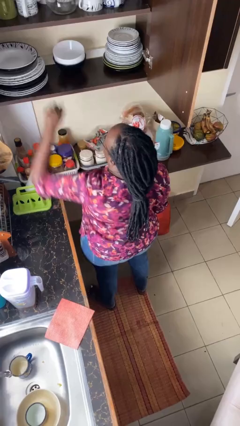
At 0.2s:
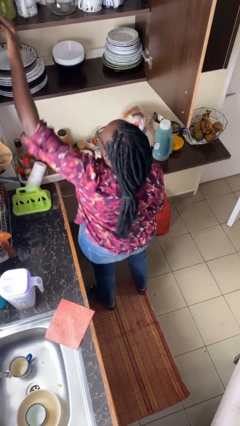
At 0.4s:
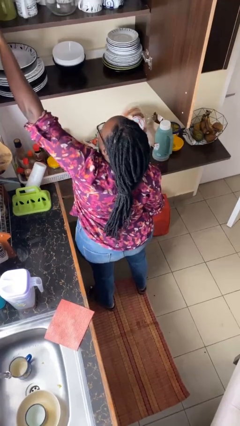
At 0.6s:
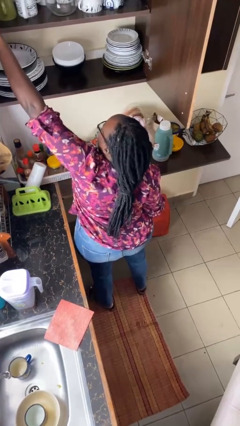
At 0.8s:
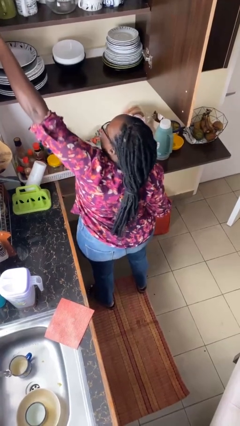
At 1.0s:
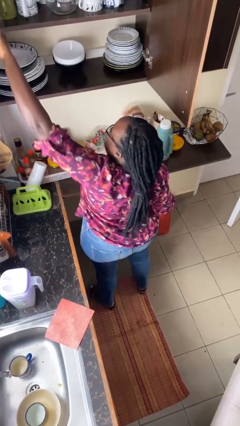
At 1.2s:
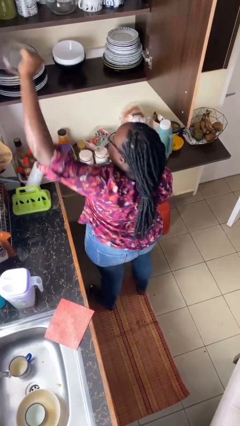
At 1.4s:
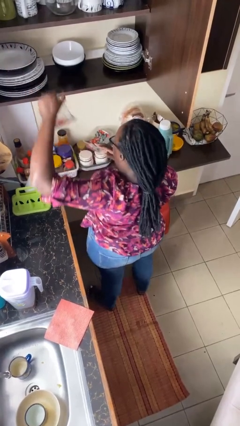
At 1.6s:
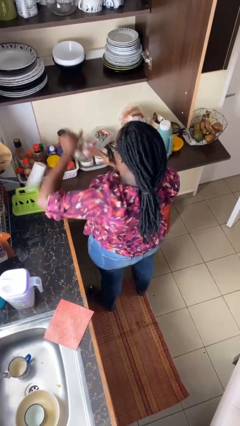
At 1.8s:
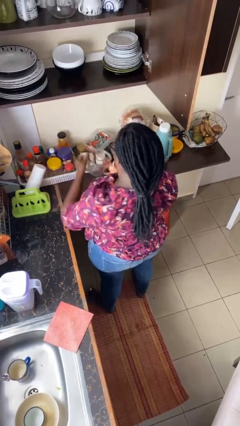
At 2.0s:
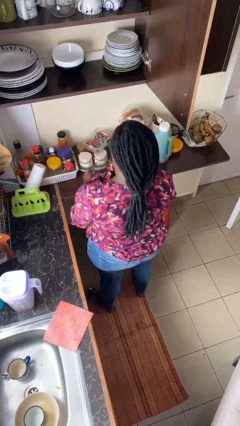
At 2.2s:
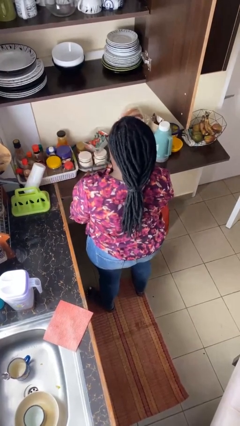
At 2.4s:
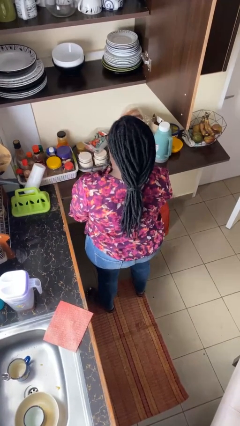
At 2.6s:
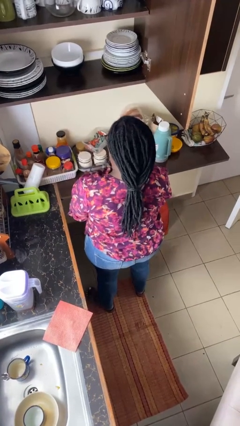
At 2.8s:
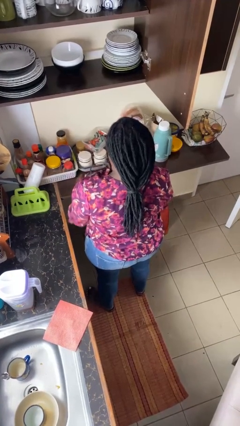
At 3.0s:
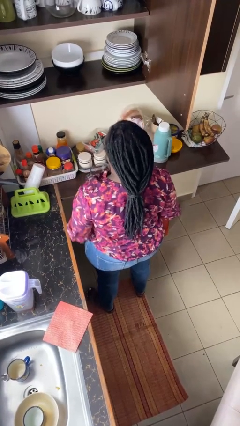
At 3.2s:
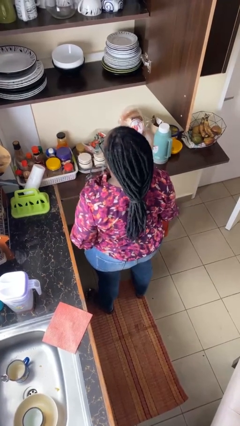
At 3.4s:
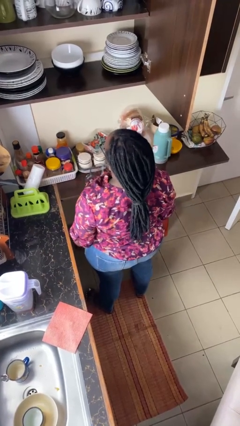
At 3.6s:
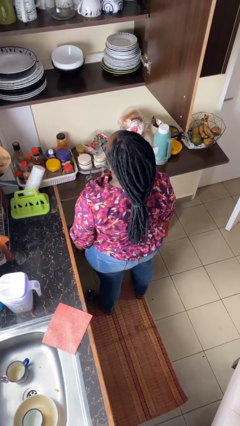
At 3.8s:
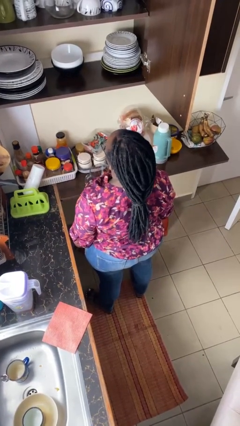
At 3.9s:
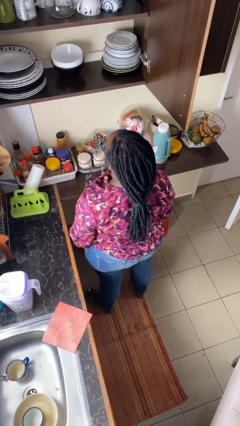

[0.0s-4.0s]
person takes object from cabinet

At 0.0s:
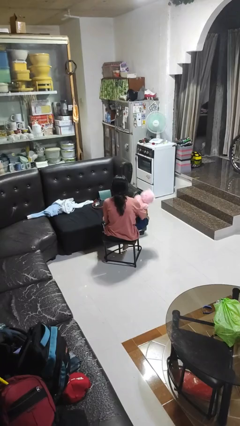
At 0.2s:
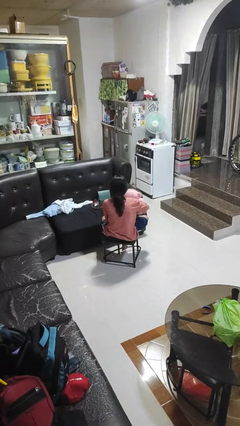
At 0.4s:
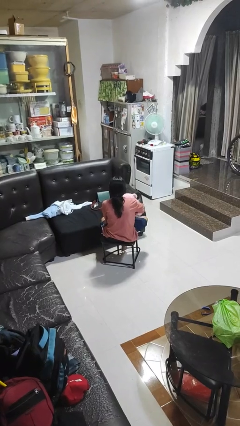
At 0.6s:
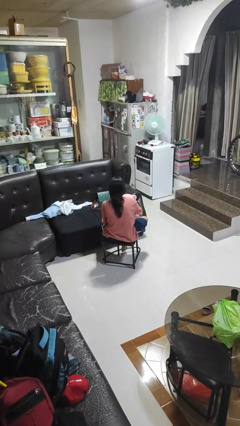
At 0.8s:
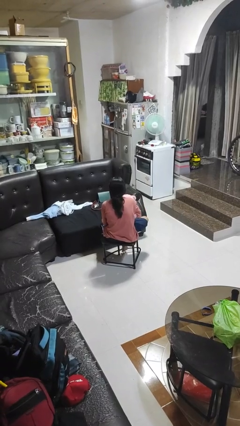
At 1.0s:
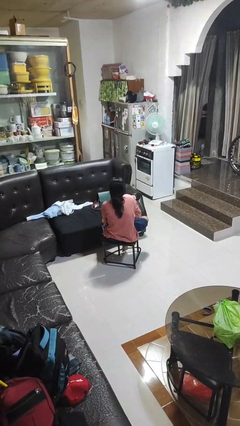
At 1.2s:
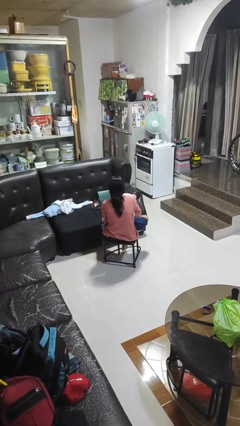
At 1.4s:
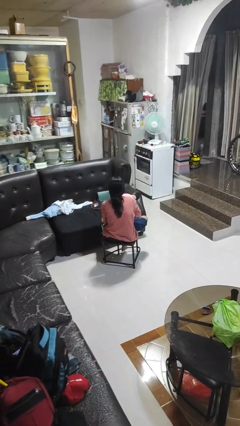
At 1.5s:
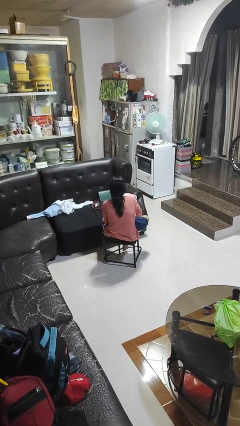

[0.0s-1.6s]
person hugs stuffed animal

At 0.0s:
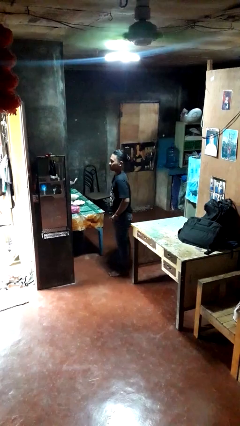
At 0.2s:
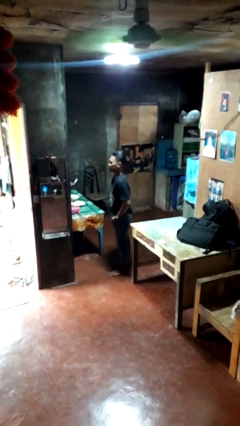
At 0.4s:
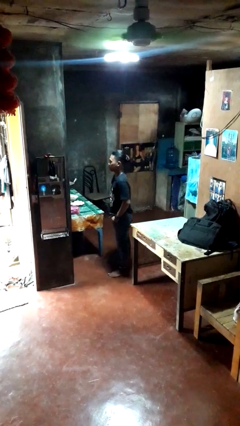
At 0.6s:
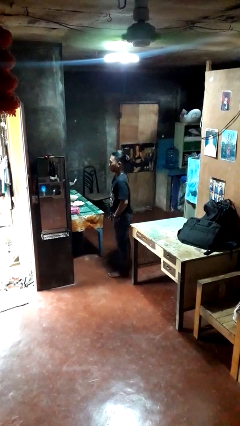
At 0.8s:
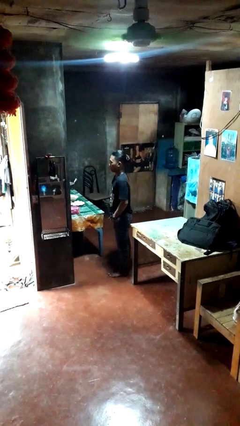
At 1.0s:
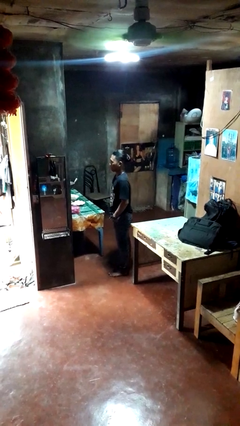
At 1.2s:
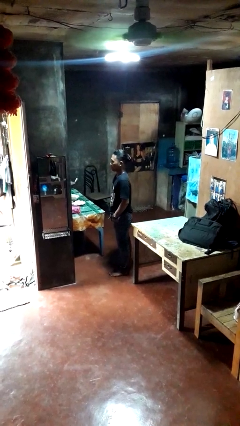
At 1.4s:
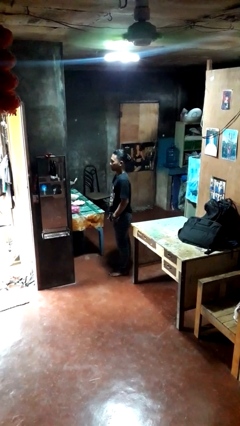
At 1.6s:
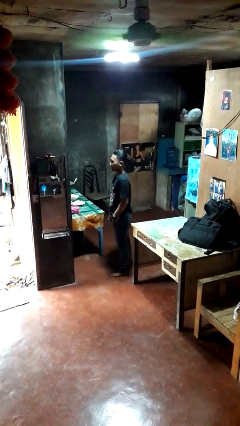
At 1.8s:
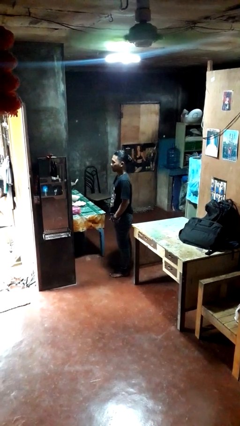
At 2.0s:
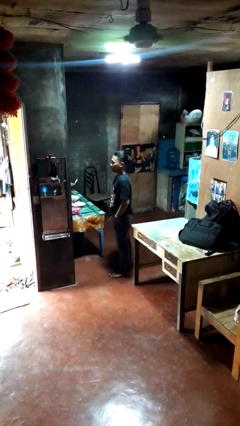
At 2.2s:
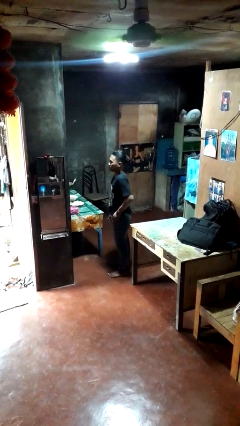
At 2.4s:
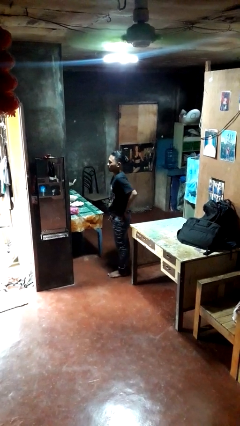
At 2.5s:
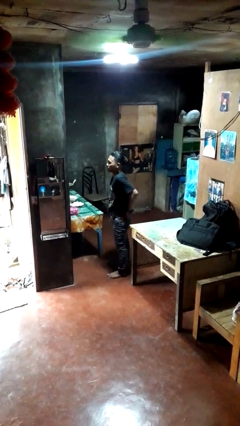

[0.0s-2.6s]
person puts hands in back pockets

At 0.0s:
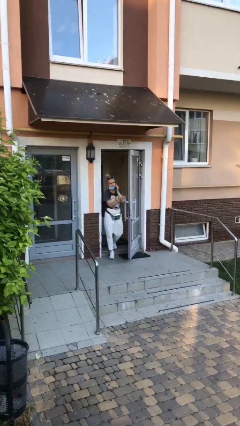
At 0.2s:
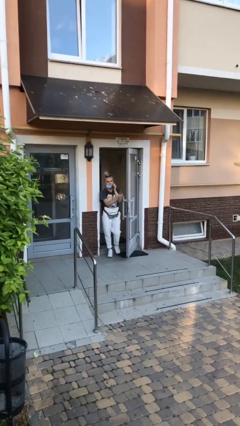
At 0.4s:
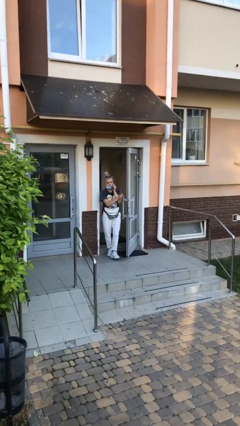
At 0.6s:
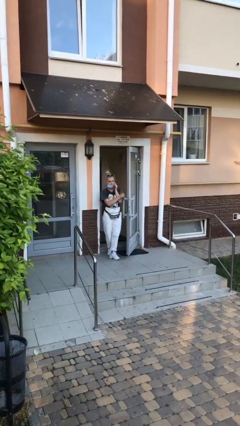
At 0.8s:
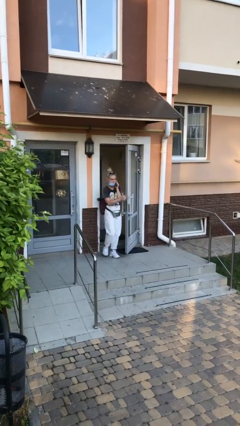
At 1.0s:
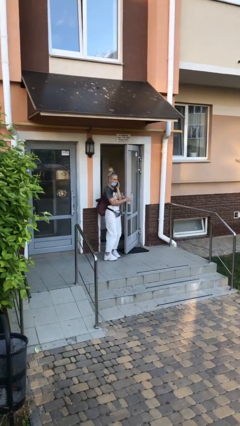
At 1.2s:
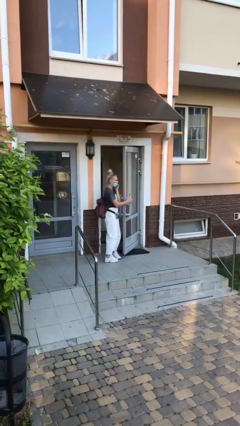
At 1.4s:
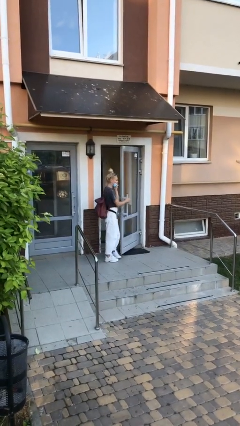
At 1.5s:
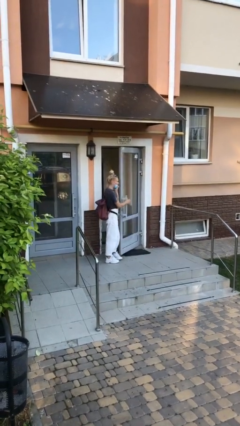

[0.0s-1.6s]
person enters scene through structure

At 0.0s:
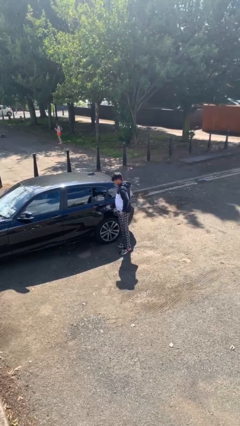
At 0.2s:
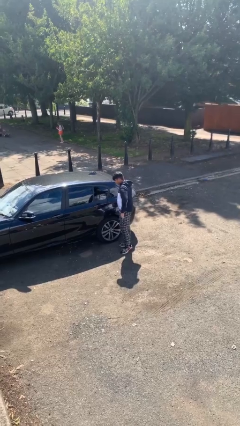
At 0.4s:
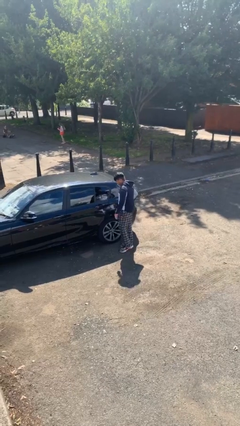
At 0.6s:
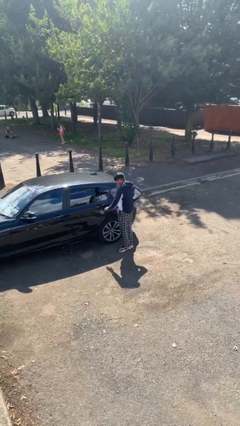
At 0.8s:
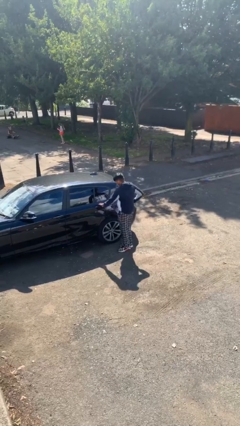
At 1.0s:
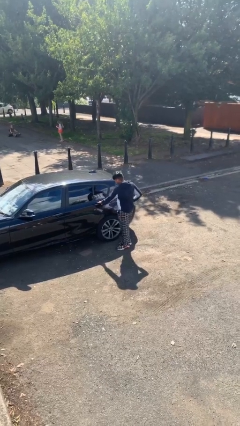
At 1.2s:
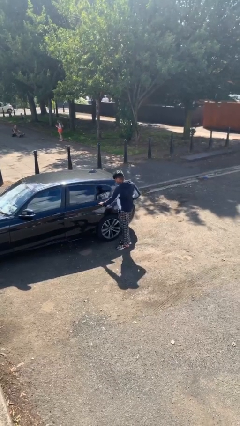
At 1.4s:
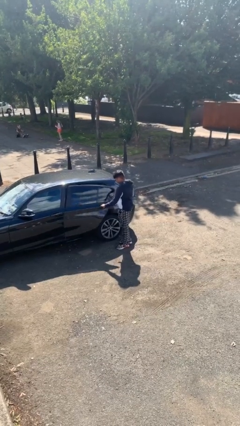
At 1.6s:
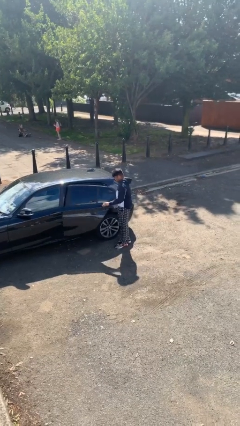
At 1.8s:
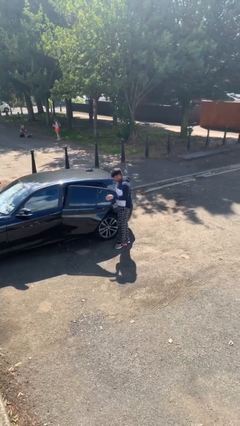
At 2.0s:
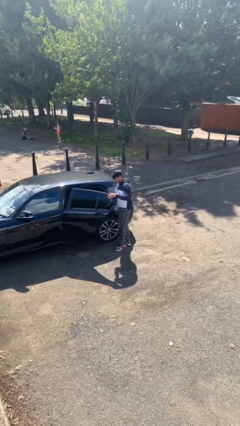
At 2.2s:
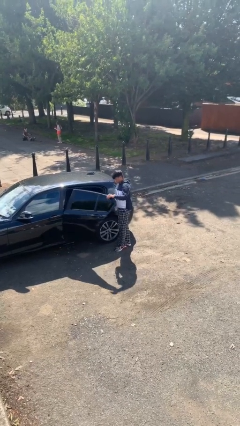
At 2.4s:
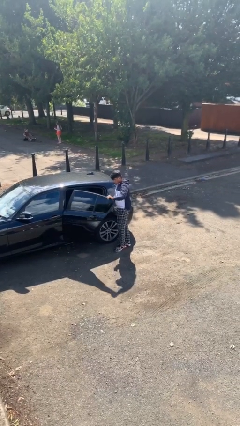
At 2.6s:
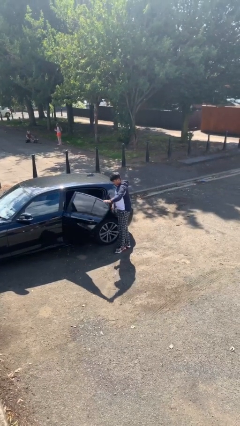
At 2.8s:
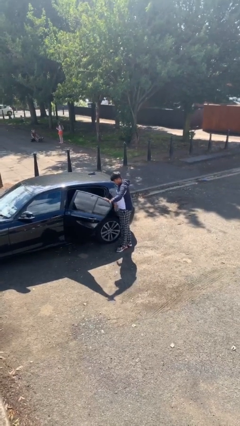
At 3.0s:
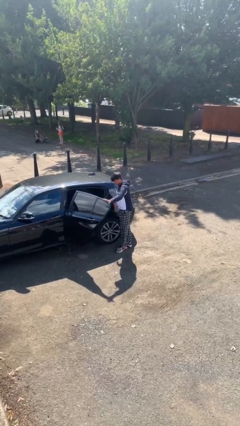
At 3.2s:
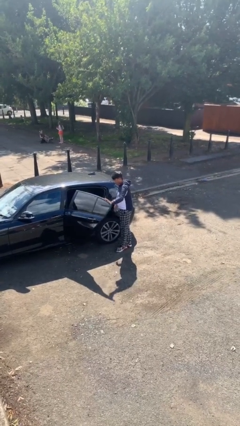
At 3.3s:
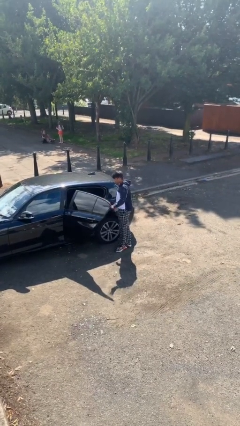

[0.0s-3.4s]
person opens car door

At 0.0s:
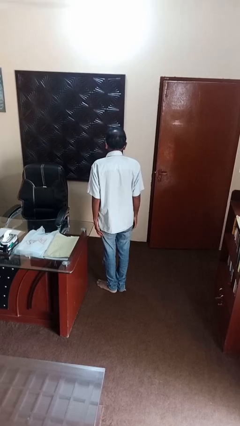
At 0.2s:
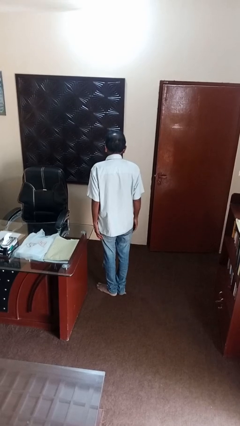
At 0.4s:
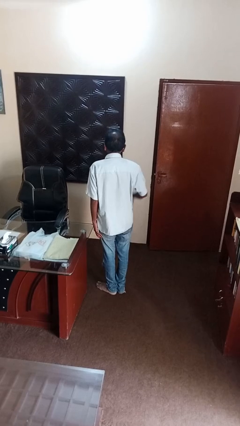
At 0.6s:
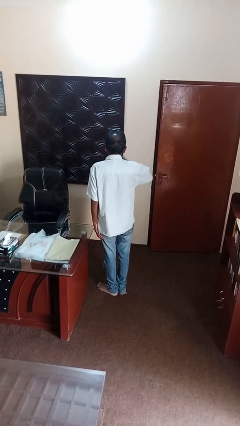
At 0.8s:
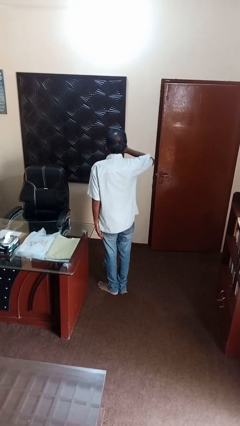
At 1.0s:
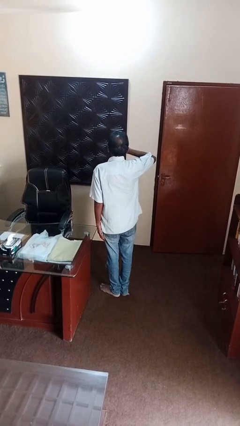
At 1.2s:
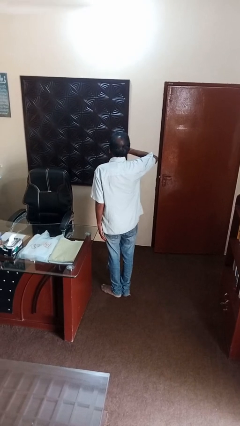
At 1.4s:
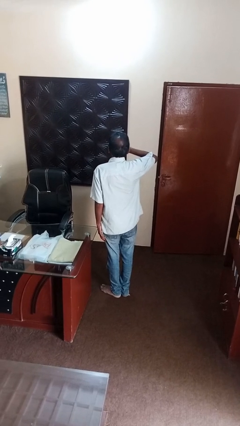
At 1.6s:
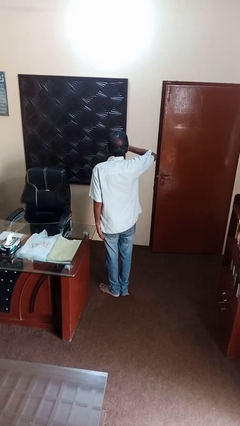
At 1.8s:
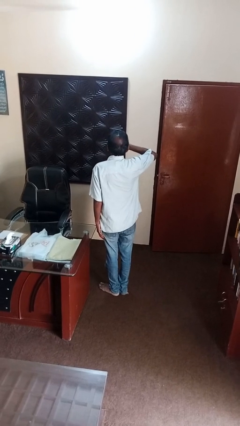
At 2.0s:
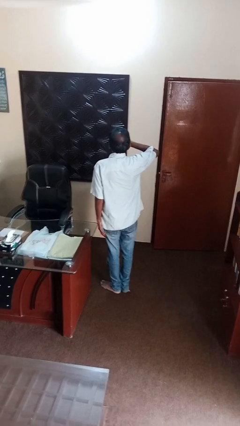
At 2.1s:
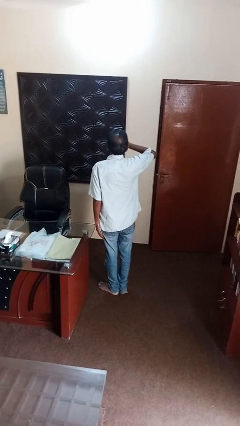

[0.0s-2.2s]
person yawns

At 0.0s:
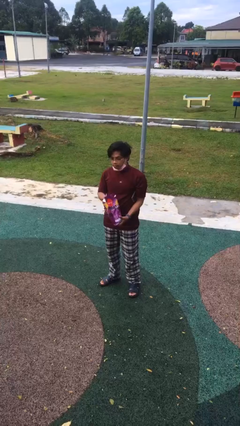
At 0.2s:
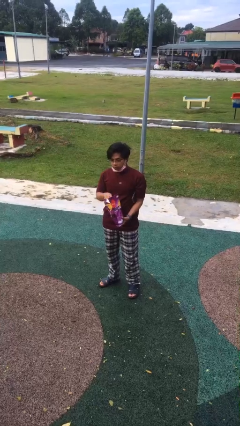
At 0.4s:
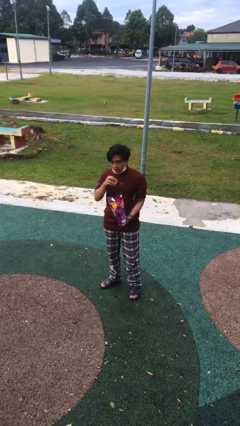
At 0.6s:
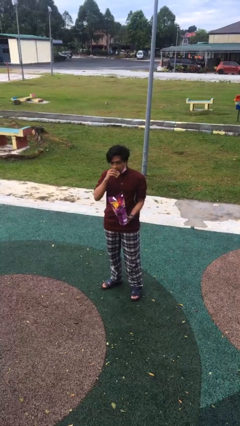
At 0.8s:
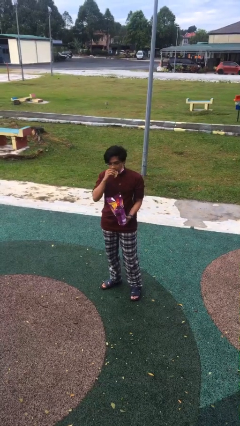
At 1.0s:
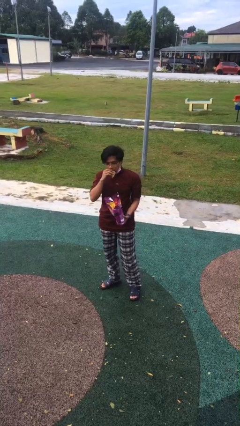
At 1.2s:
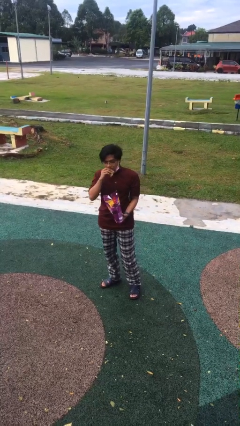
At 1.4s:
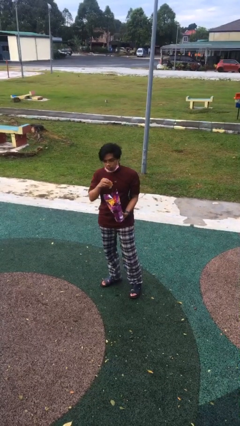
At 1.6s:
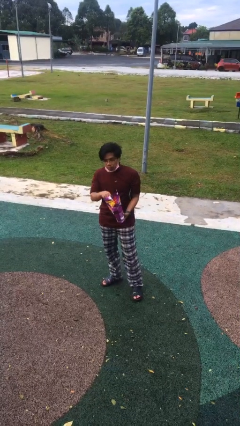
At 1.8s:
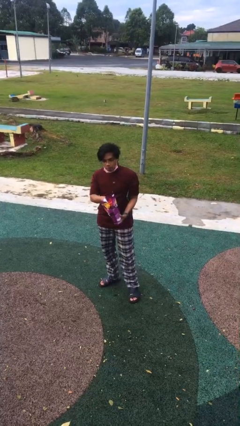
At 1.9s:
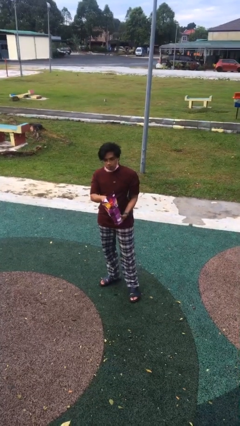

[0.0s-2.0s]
person eats snack from bag
